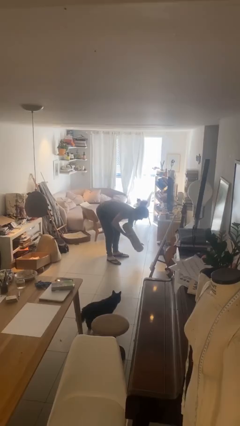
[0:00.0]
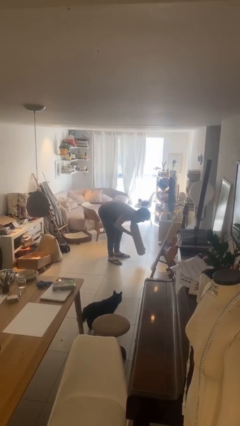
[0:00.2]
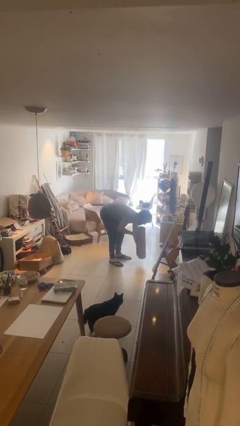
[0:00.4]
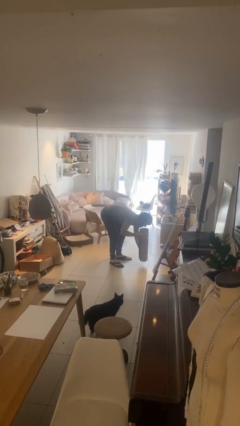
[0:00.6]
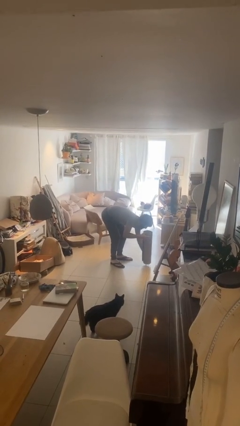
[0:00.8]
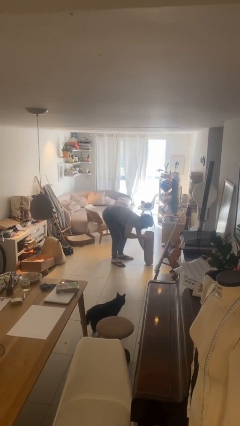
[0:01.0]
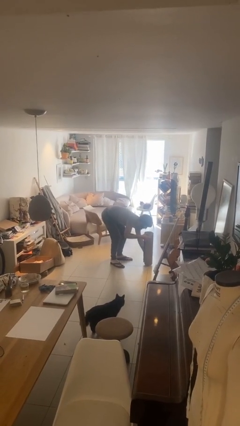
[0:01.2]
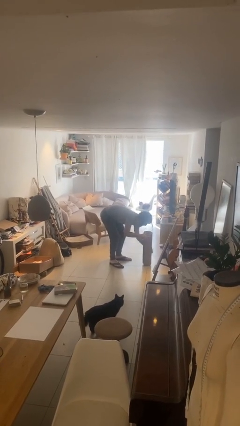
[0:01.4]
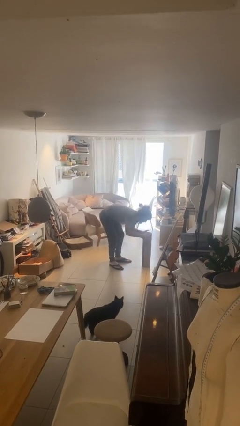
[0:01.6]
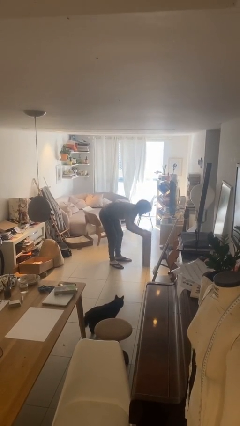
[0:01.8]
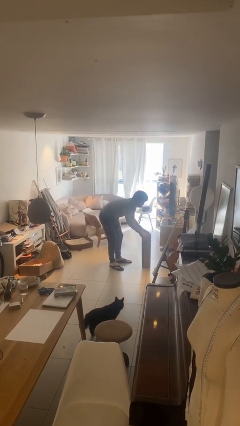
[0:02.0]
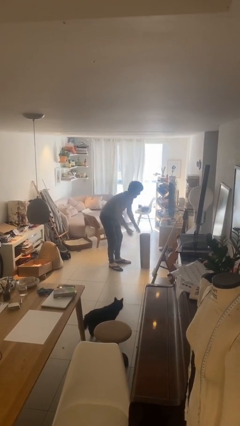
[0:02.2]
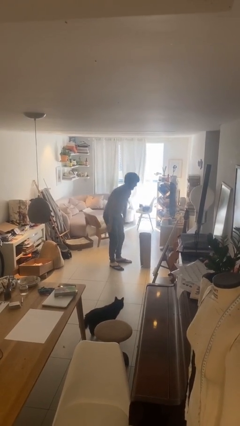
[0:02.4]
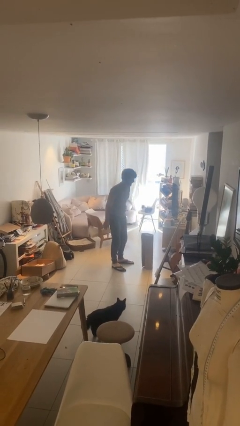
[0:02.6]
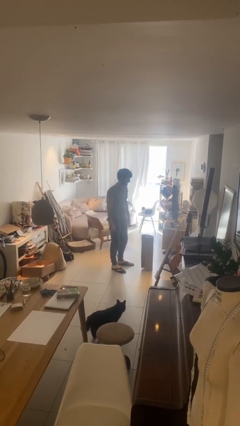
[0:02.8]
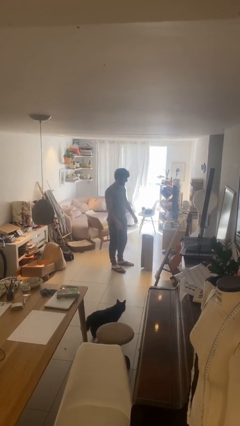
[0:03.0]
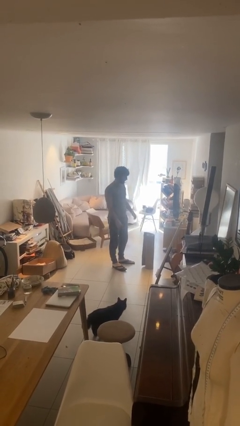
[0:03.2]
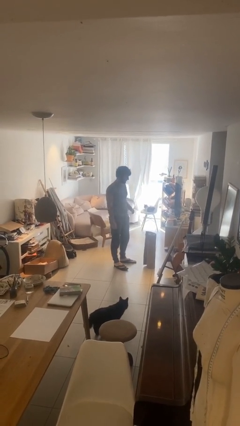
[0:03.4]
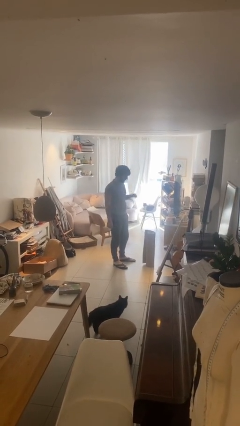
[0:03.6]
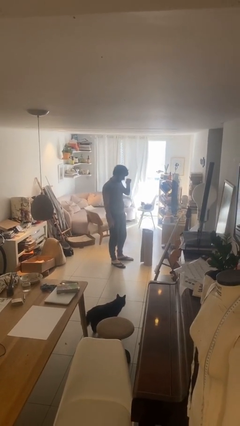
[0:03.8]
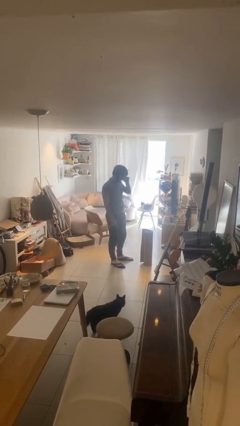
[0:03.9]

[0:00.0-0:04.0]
person puts down object on floor

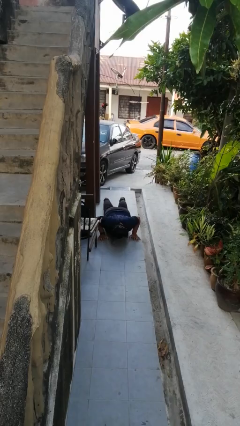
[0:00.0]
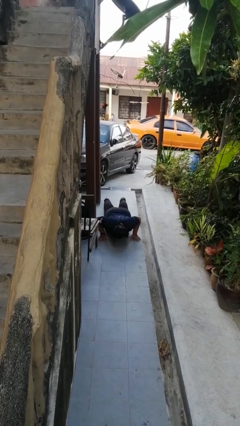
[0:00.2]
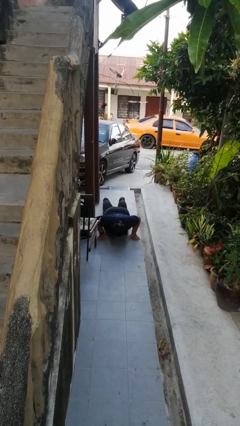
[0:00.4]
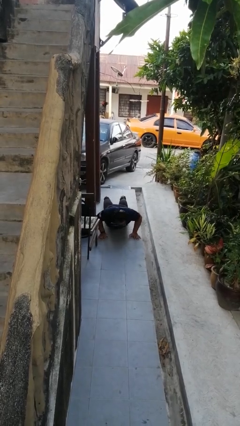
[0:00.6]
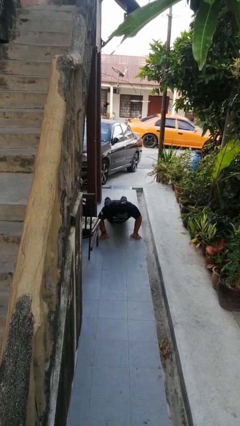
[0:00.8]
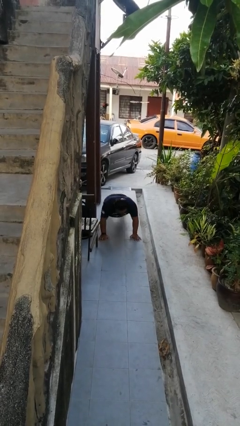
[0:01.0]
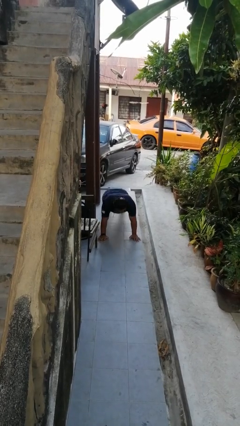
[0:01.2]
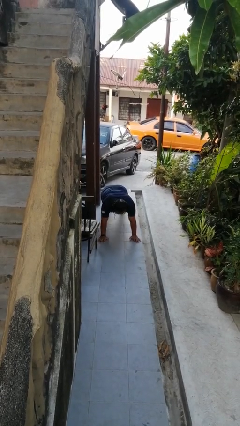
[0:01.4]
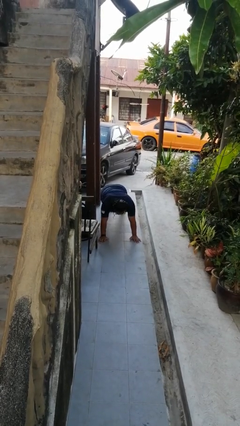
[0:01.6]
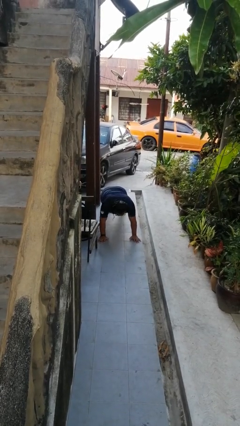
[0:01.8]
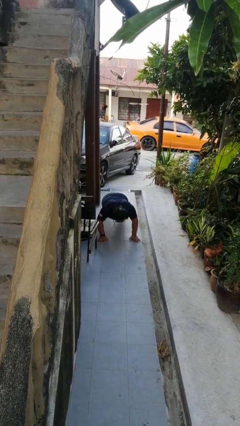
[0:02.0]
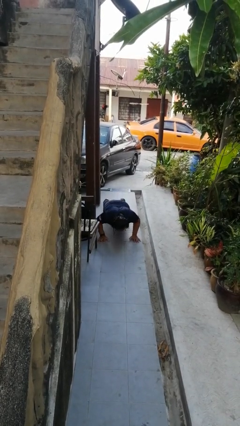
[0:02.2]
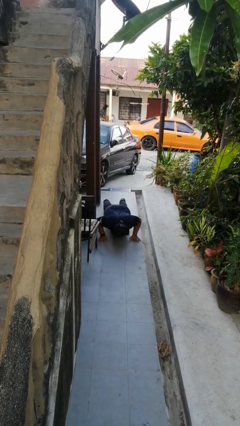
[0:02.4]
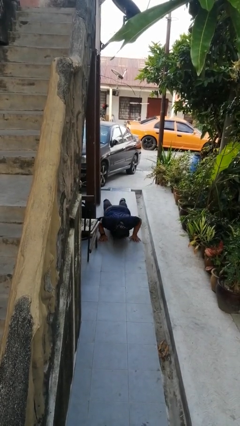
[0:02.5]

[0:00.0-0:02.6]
person exercises with pushup

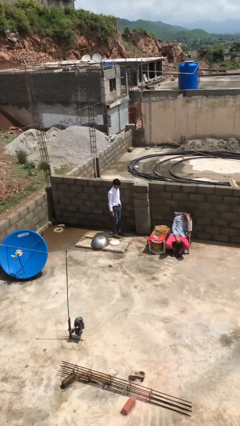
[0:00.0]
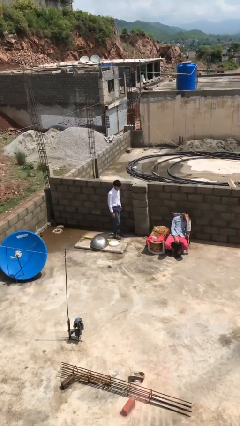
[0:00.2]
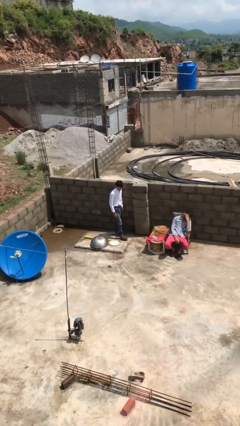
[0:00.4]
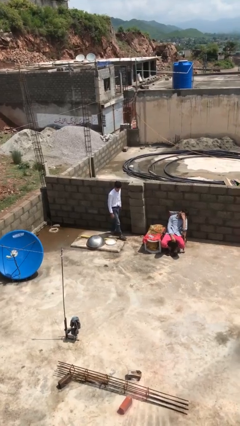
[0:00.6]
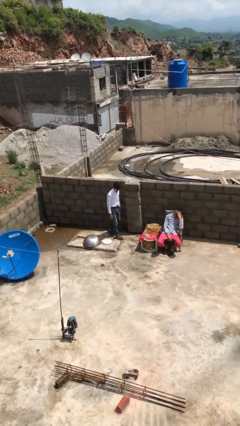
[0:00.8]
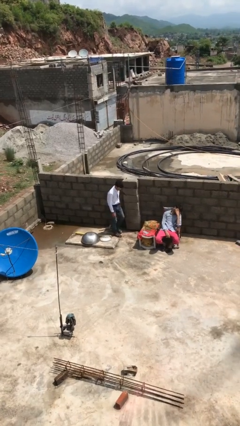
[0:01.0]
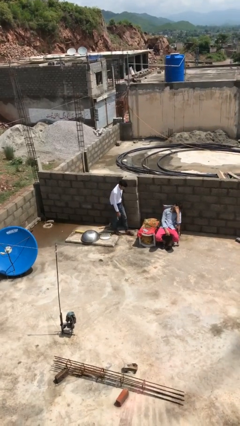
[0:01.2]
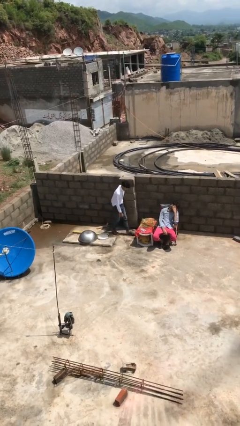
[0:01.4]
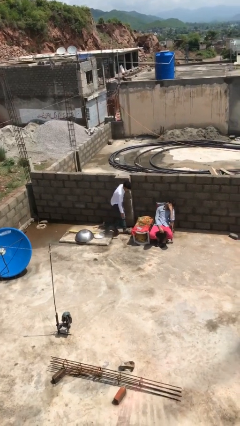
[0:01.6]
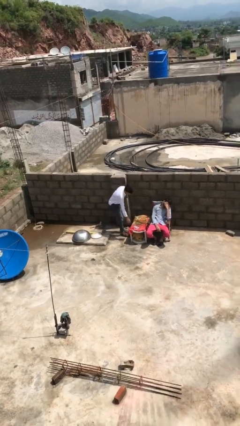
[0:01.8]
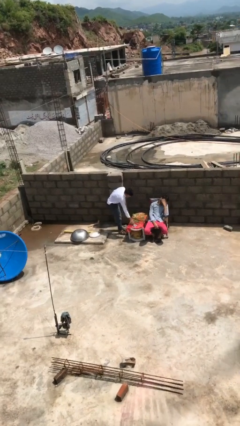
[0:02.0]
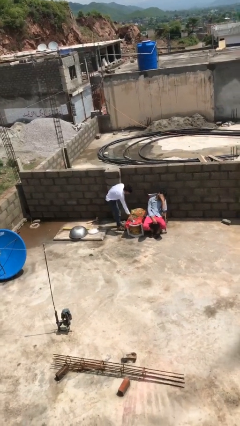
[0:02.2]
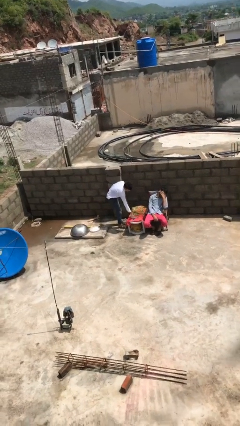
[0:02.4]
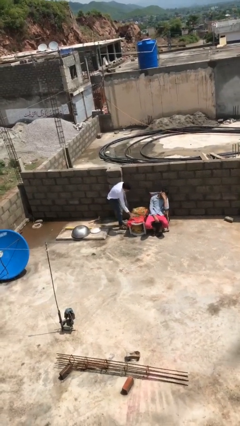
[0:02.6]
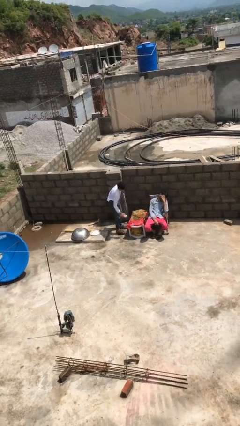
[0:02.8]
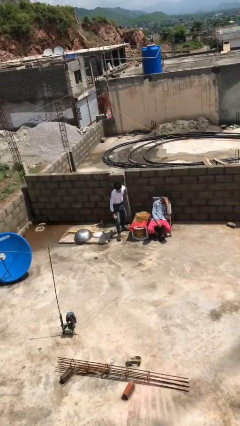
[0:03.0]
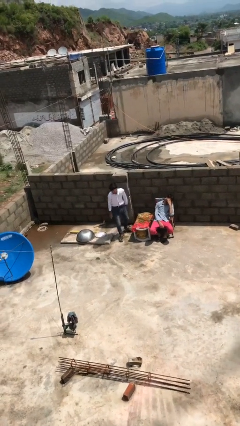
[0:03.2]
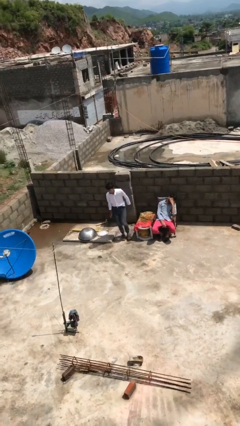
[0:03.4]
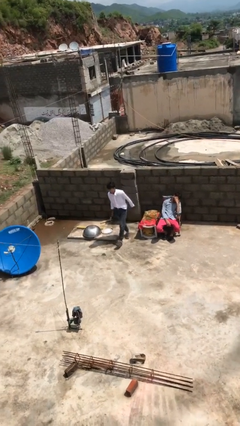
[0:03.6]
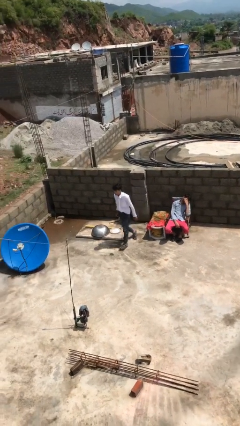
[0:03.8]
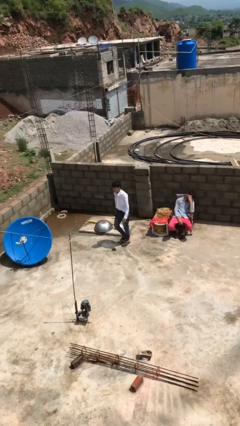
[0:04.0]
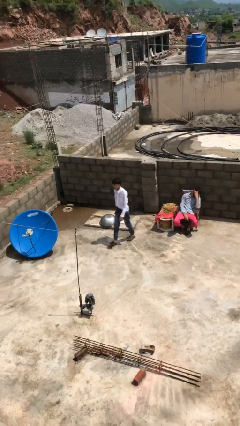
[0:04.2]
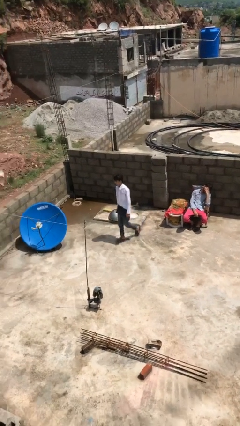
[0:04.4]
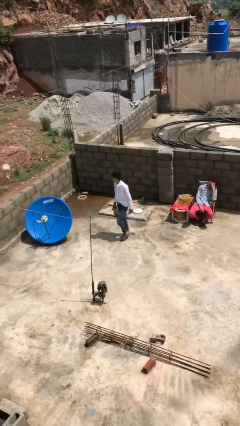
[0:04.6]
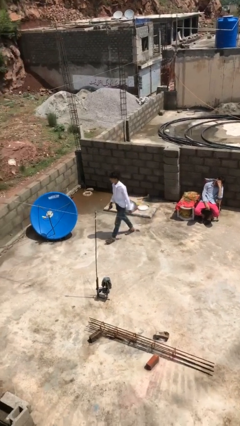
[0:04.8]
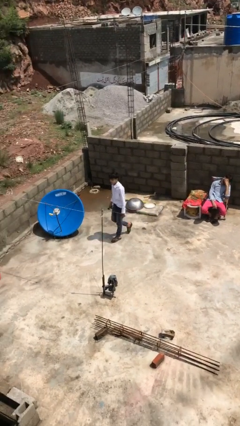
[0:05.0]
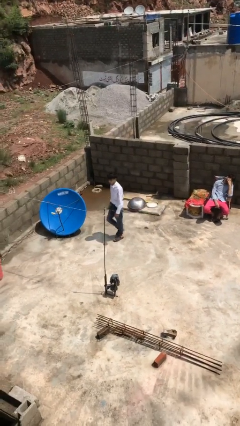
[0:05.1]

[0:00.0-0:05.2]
person steals object from person

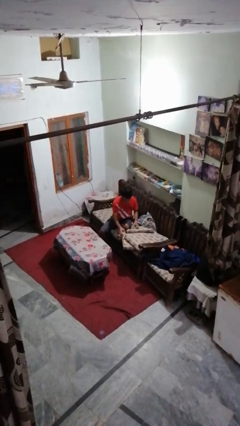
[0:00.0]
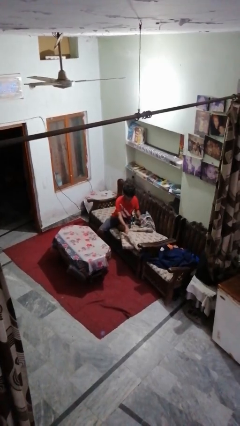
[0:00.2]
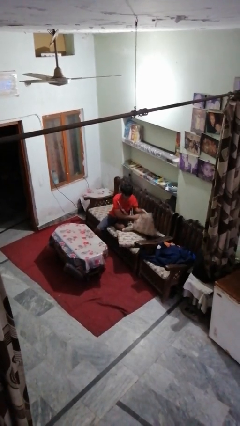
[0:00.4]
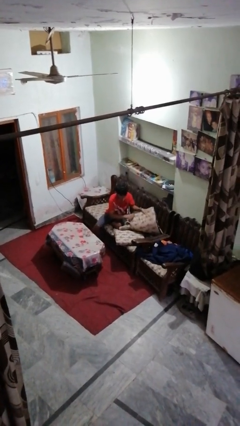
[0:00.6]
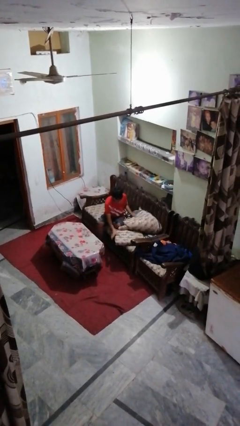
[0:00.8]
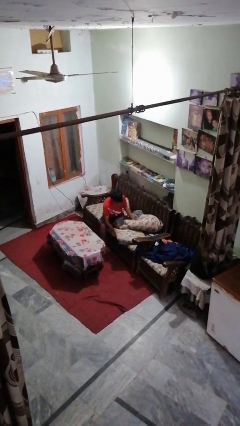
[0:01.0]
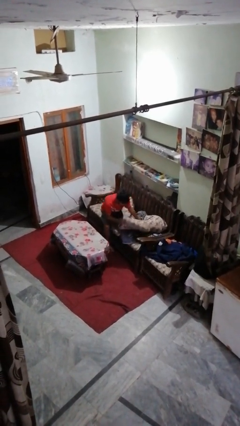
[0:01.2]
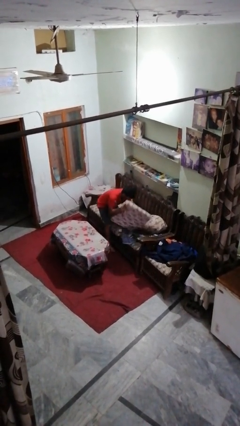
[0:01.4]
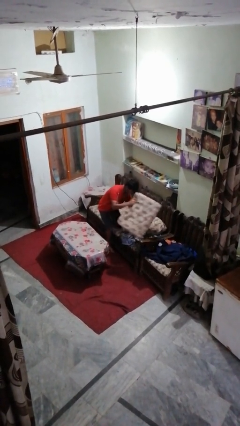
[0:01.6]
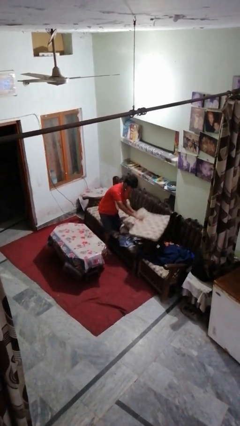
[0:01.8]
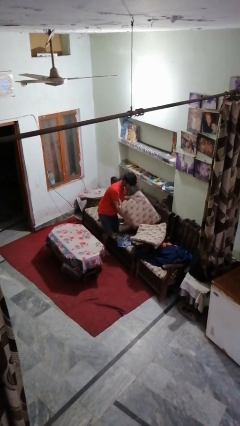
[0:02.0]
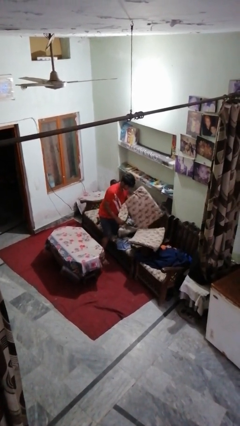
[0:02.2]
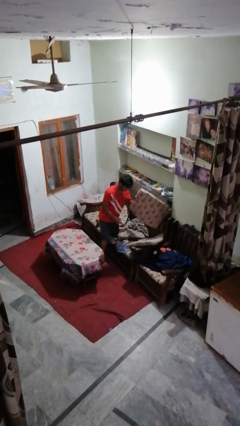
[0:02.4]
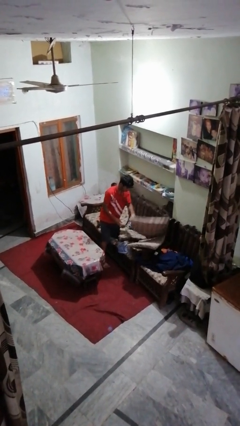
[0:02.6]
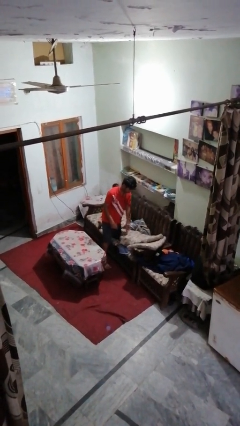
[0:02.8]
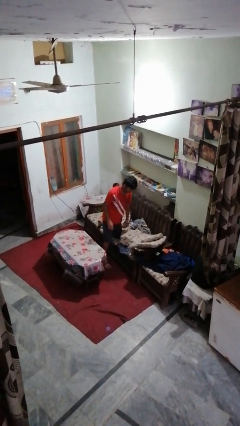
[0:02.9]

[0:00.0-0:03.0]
person searches in couch

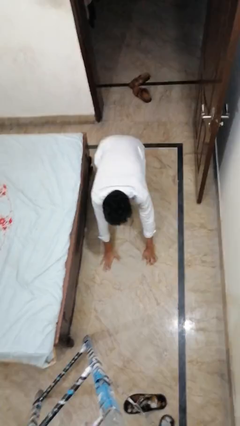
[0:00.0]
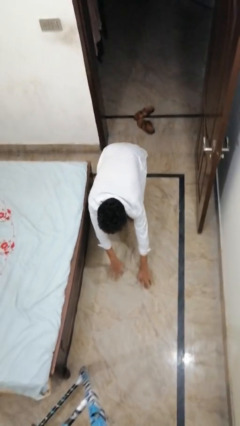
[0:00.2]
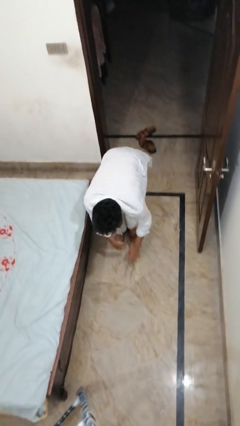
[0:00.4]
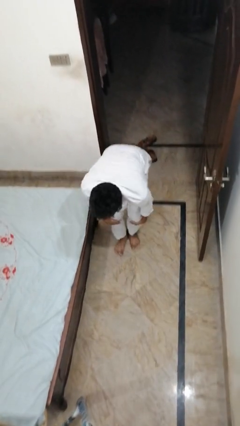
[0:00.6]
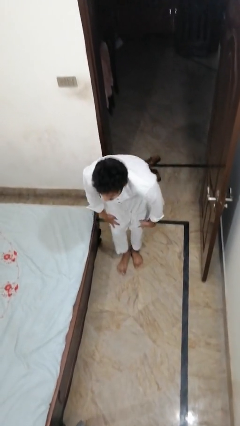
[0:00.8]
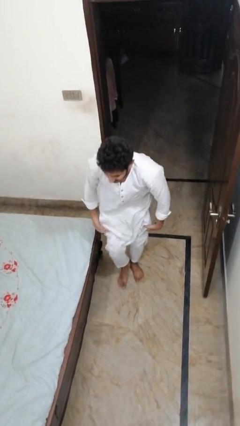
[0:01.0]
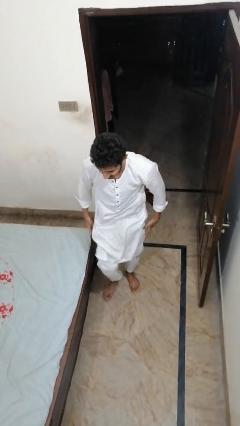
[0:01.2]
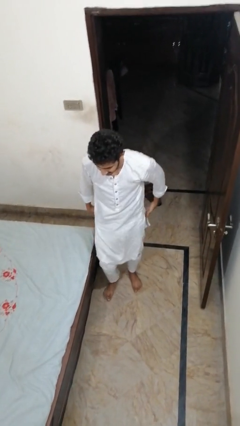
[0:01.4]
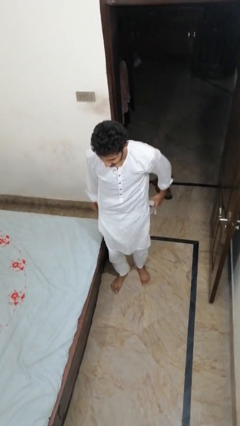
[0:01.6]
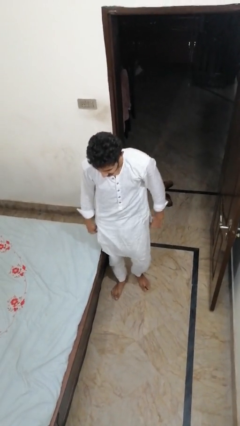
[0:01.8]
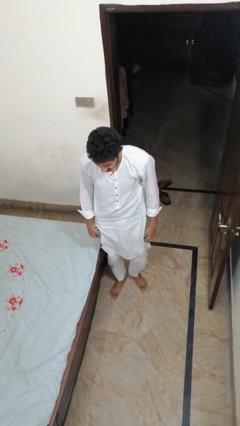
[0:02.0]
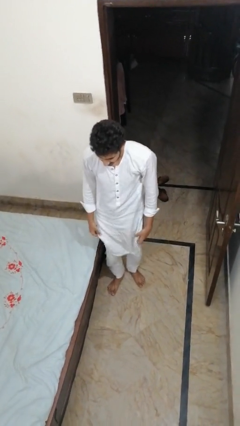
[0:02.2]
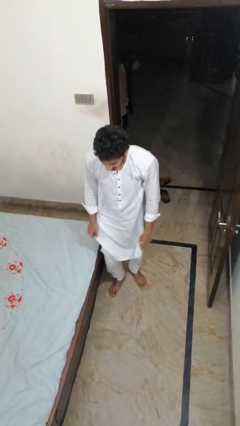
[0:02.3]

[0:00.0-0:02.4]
person stands up from floor

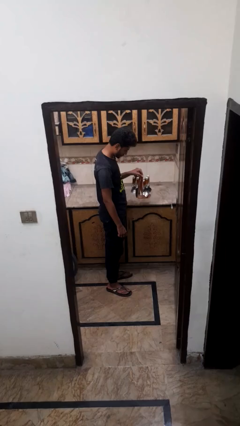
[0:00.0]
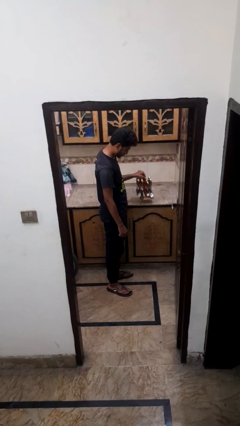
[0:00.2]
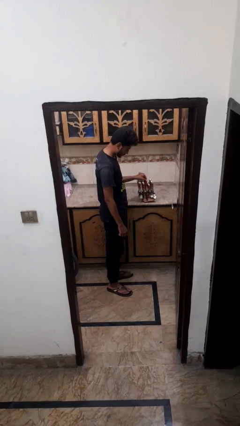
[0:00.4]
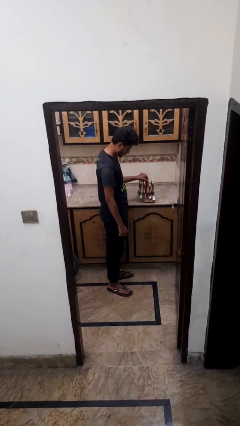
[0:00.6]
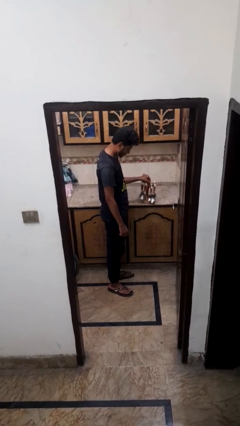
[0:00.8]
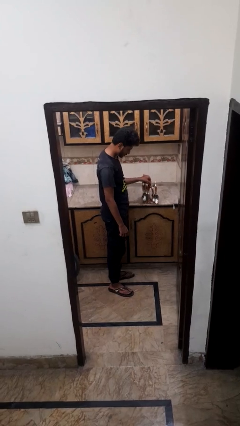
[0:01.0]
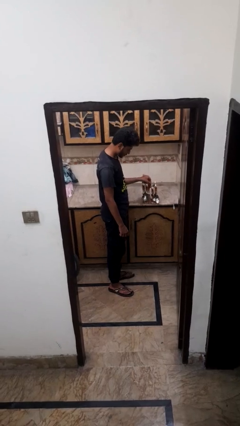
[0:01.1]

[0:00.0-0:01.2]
person puts down object on countertop
